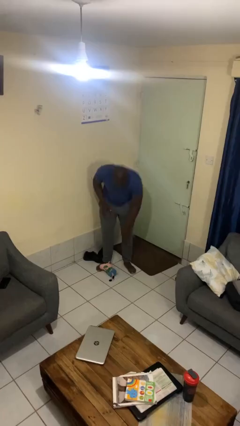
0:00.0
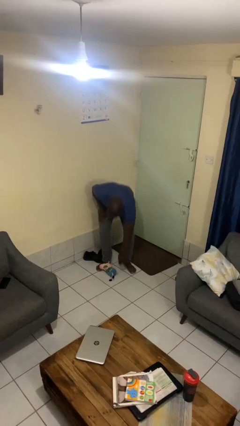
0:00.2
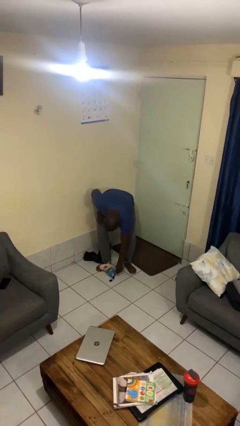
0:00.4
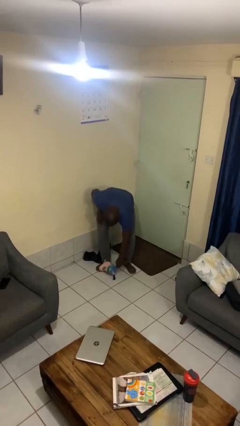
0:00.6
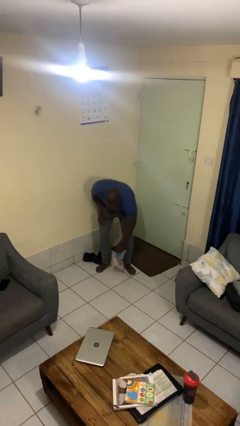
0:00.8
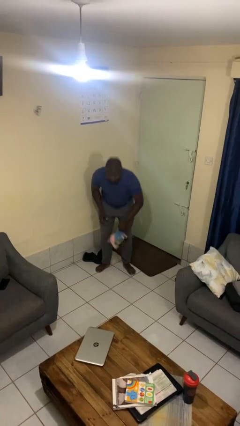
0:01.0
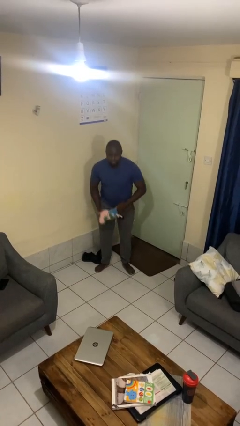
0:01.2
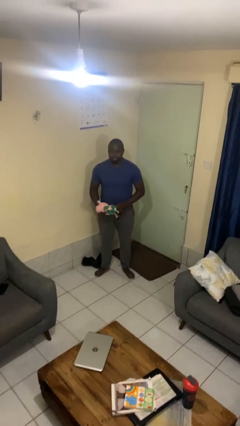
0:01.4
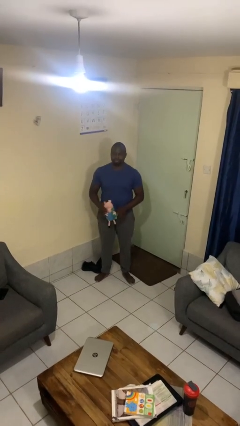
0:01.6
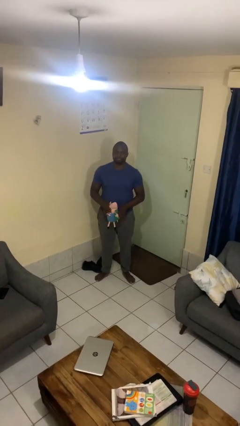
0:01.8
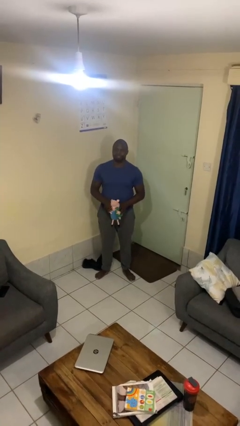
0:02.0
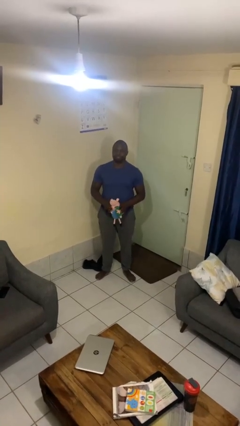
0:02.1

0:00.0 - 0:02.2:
person picks up object from floor

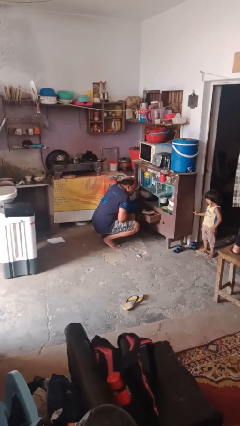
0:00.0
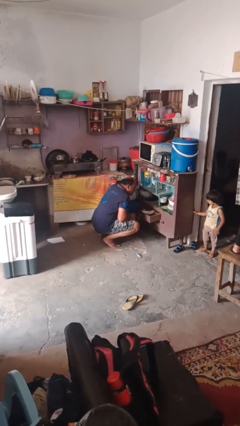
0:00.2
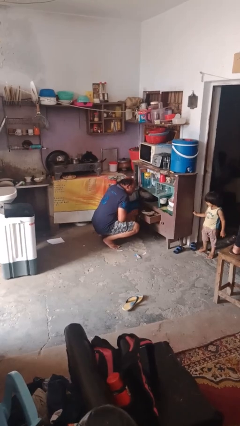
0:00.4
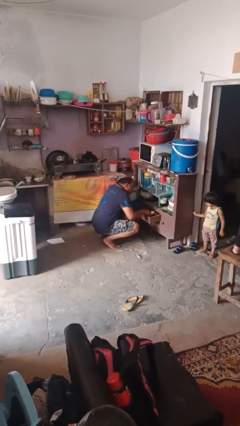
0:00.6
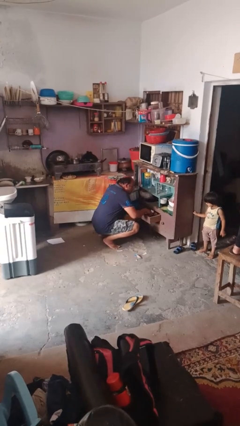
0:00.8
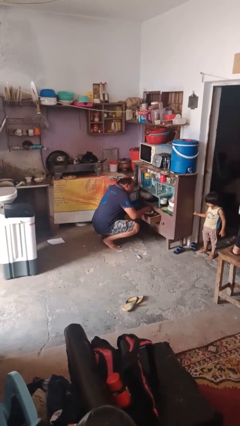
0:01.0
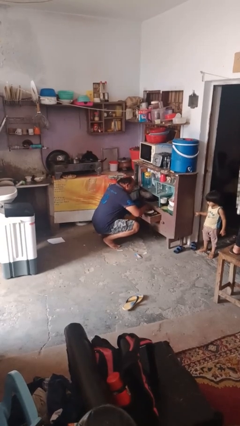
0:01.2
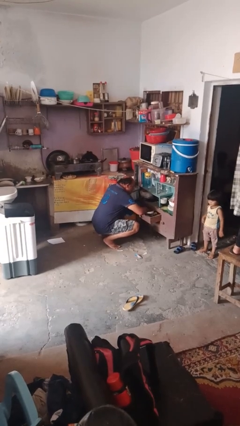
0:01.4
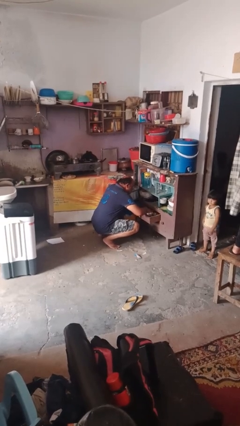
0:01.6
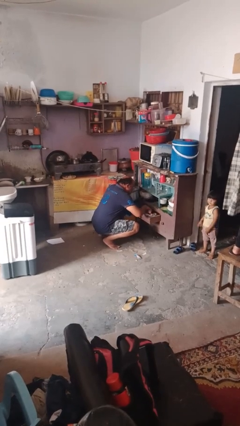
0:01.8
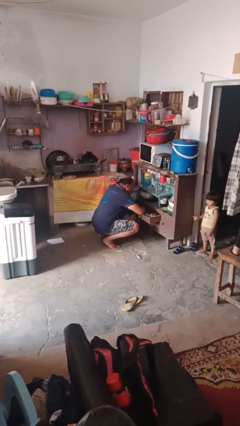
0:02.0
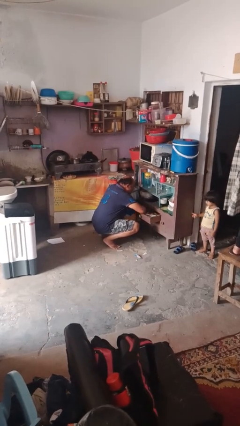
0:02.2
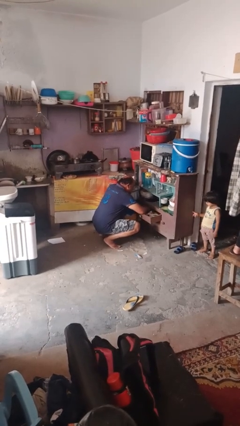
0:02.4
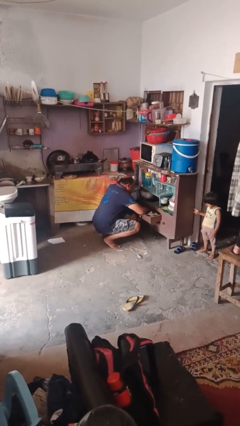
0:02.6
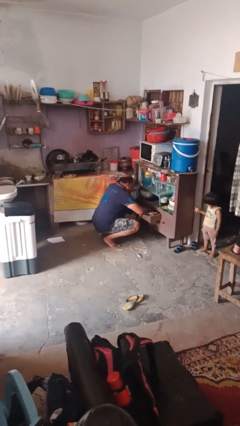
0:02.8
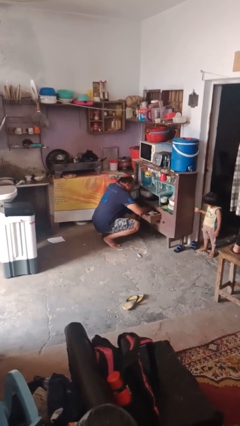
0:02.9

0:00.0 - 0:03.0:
person searches in kitchen drawer

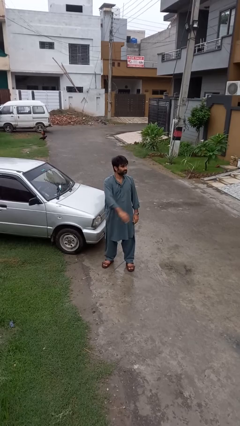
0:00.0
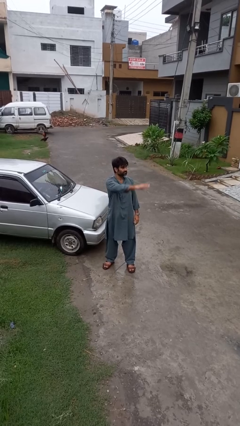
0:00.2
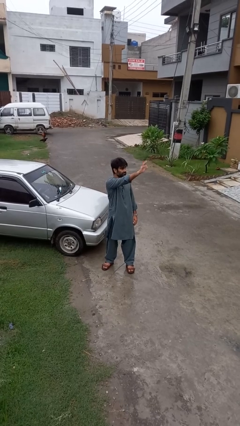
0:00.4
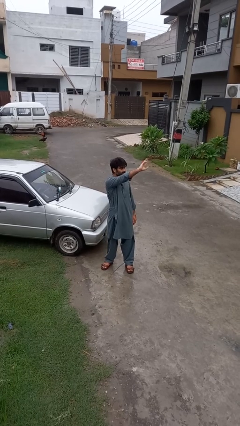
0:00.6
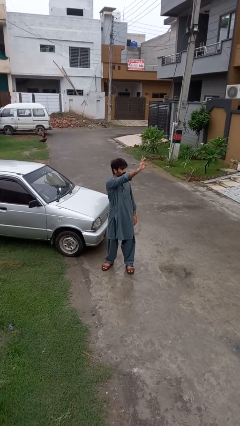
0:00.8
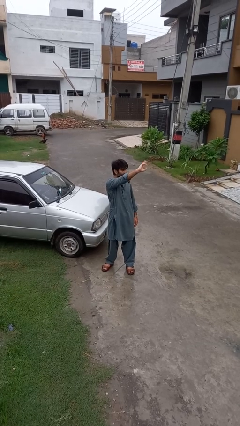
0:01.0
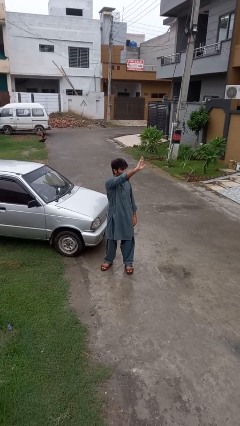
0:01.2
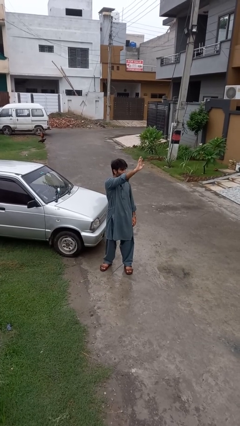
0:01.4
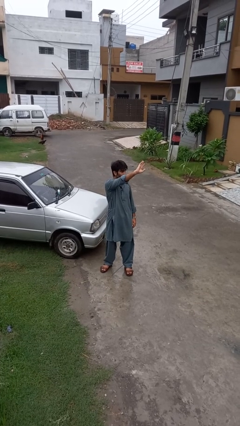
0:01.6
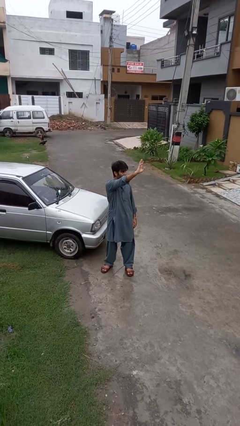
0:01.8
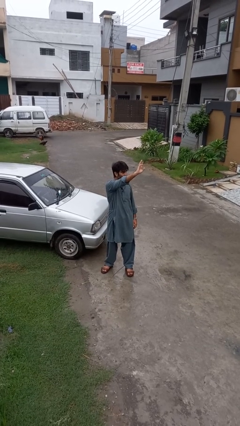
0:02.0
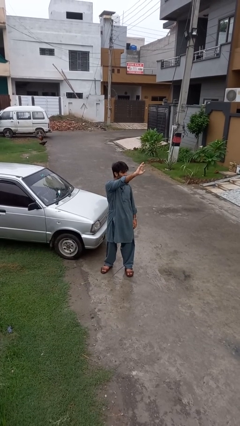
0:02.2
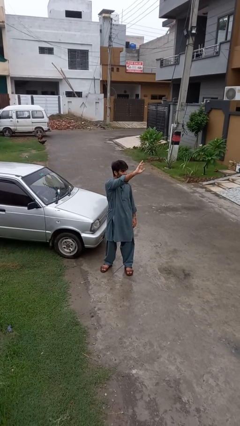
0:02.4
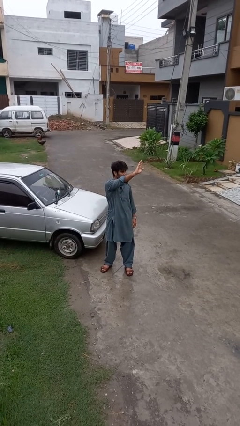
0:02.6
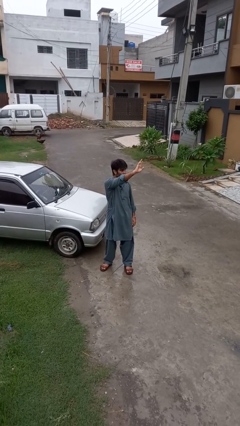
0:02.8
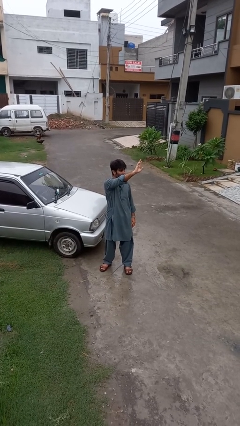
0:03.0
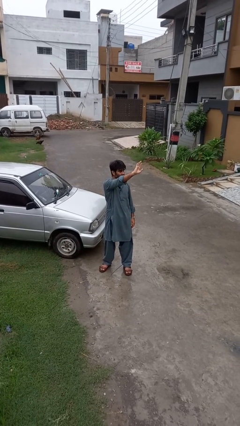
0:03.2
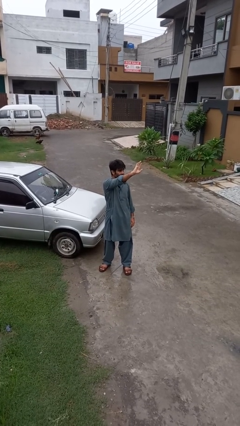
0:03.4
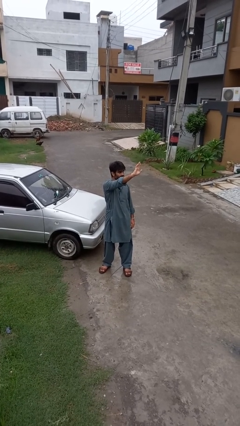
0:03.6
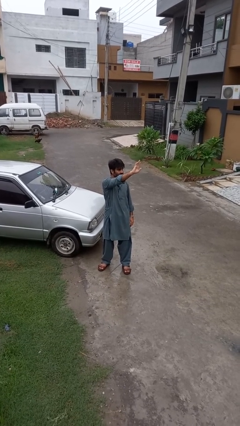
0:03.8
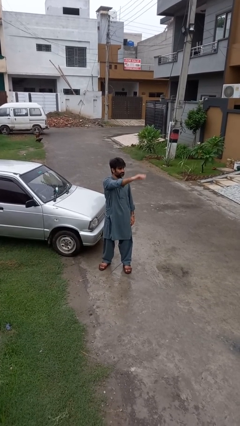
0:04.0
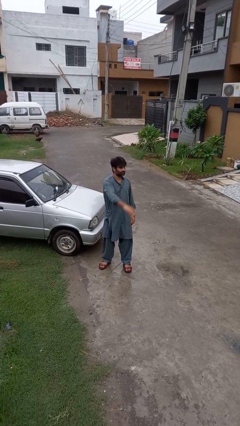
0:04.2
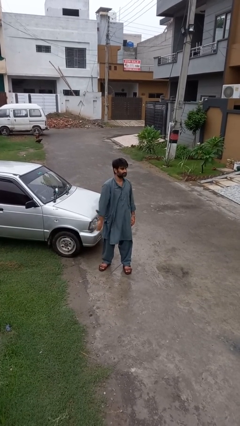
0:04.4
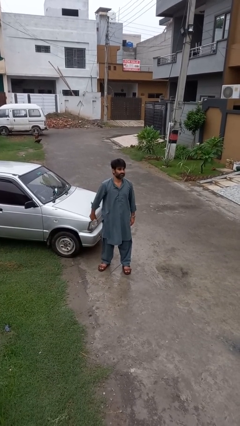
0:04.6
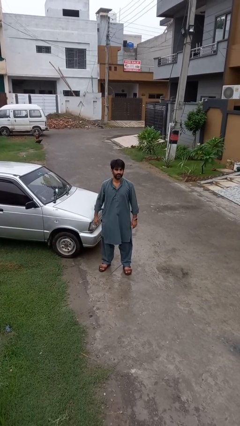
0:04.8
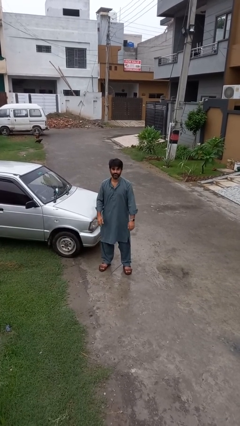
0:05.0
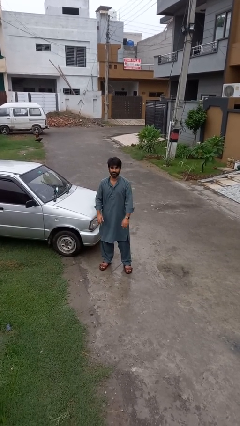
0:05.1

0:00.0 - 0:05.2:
person waves at person

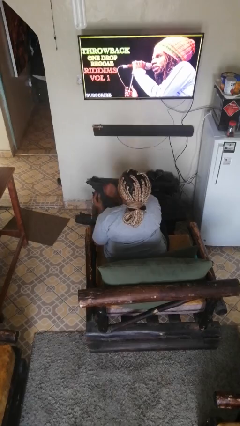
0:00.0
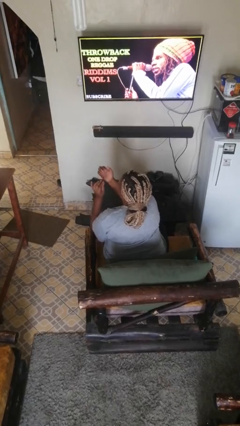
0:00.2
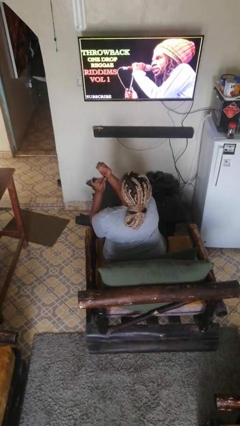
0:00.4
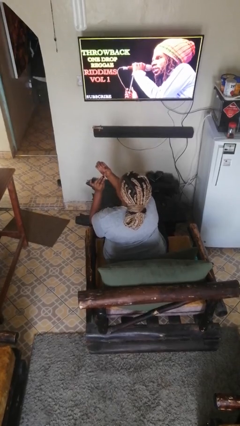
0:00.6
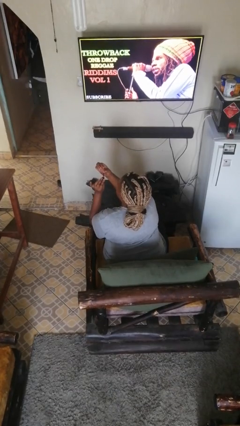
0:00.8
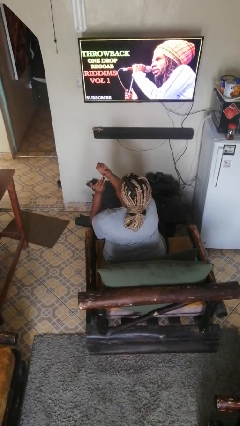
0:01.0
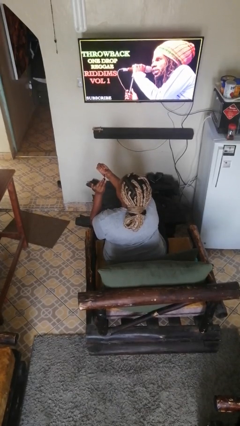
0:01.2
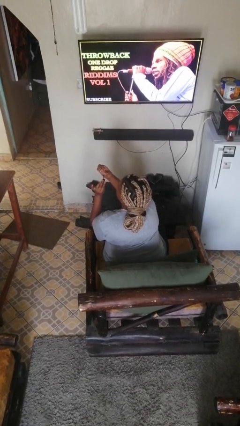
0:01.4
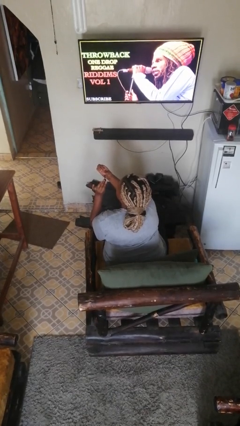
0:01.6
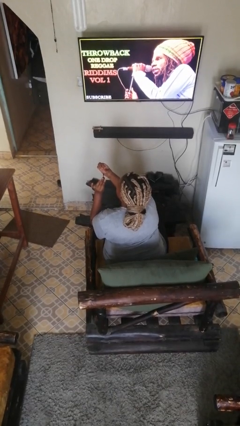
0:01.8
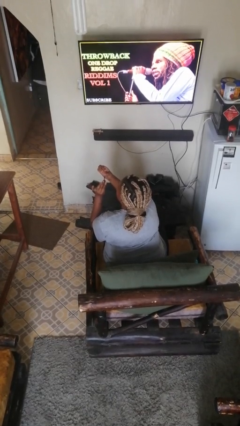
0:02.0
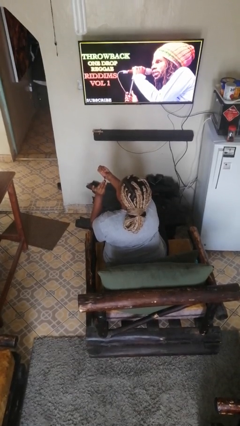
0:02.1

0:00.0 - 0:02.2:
person paints fingernails

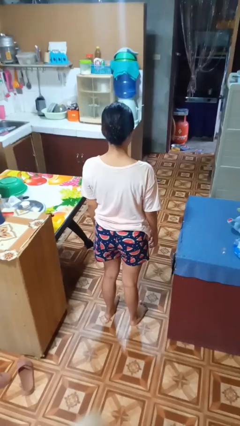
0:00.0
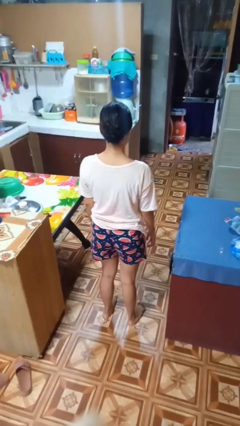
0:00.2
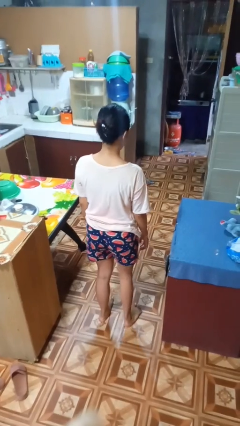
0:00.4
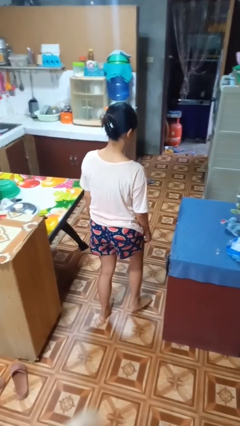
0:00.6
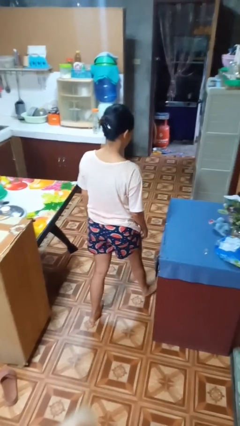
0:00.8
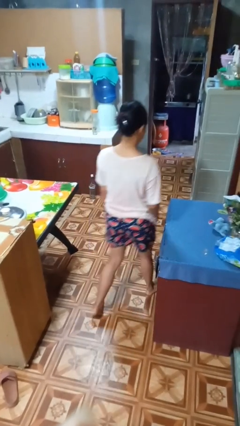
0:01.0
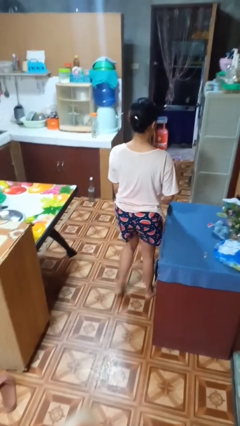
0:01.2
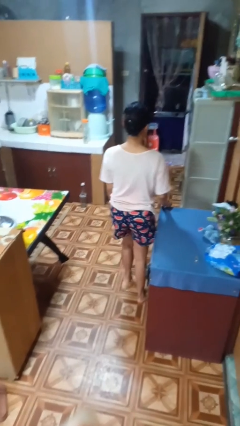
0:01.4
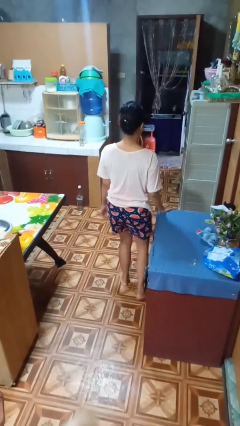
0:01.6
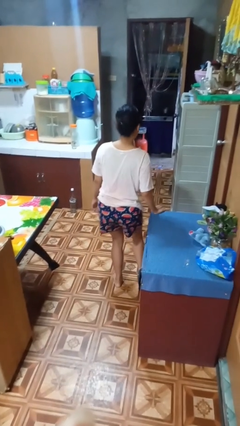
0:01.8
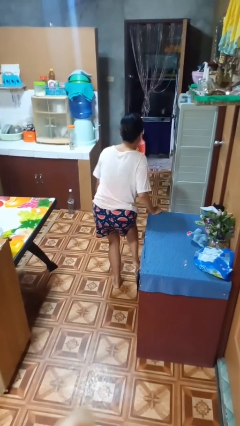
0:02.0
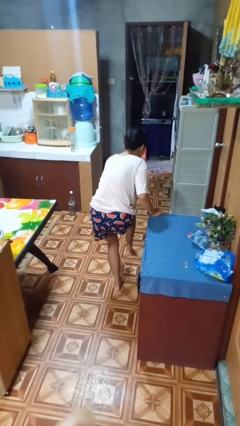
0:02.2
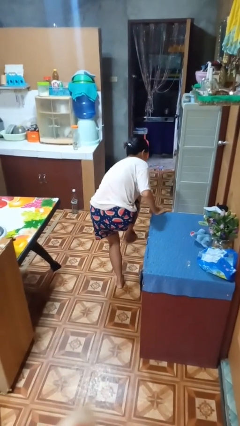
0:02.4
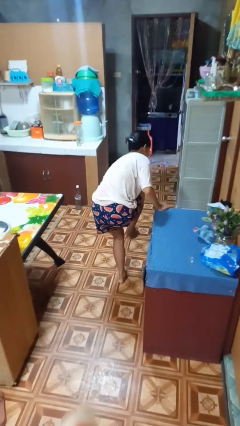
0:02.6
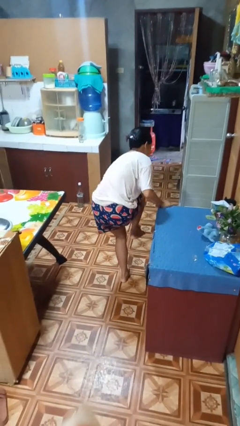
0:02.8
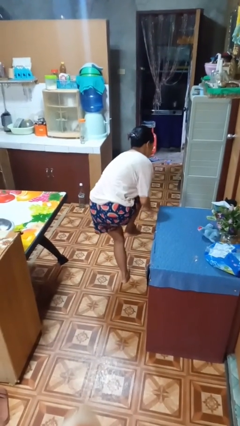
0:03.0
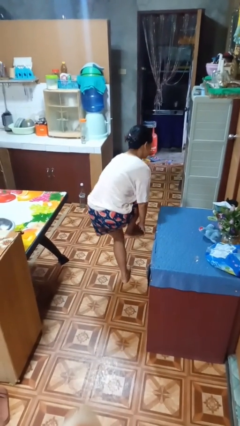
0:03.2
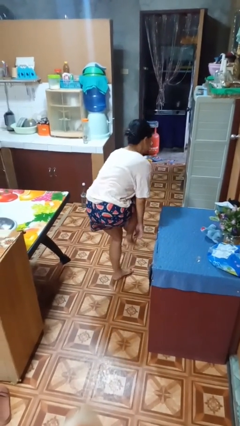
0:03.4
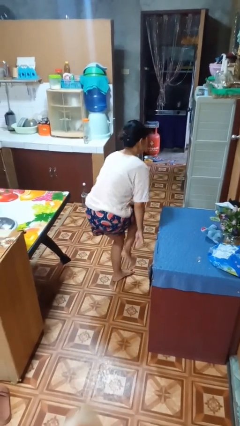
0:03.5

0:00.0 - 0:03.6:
person stubs toe

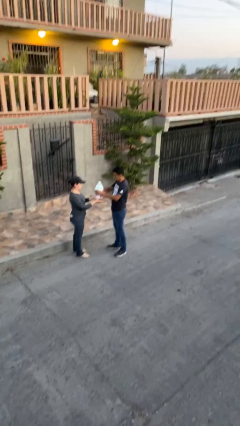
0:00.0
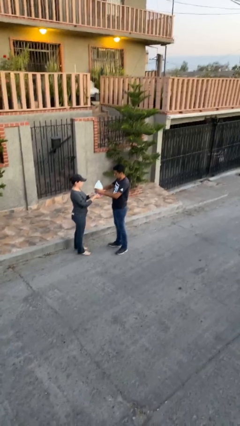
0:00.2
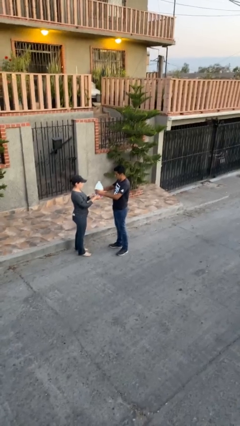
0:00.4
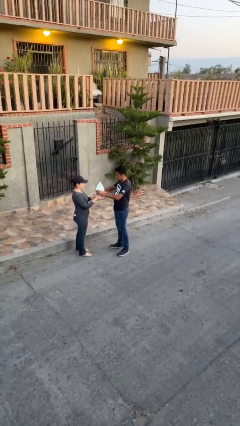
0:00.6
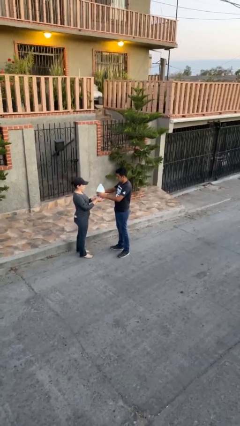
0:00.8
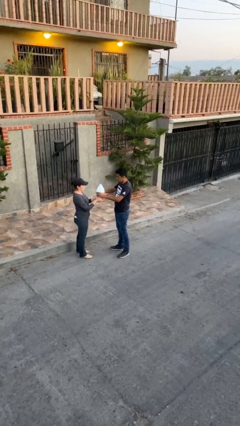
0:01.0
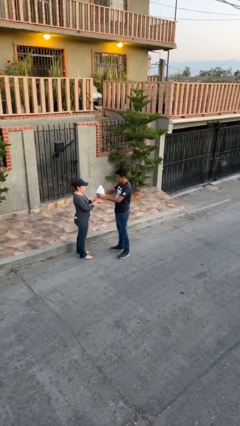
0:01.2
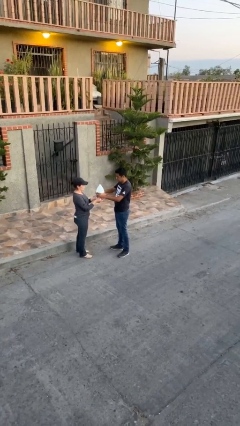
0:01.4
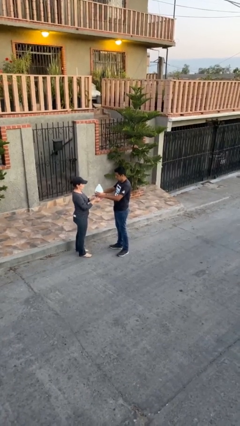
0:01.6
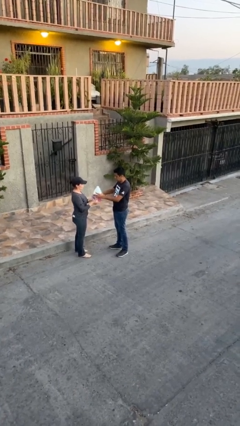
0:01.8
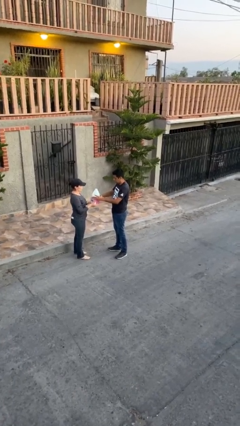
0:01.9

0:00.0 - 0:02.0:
person transfers object to person
